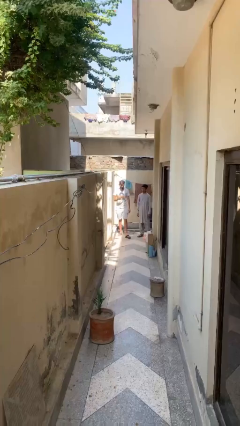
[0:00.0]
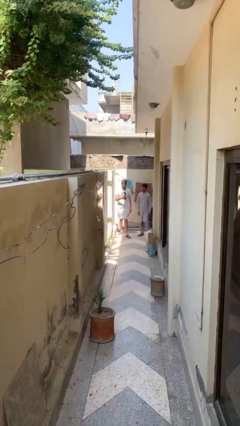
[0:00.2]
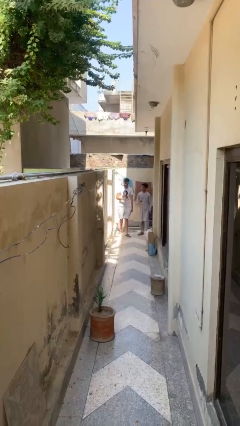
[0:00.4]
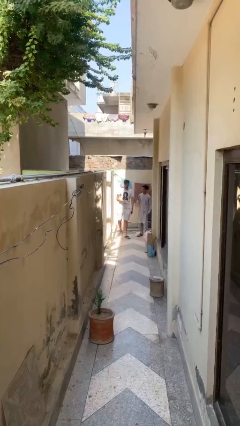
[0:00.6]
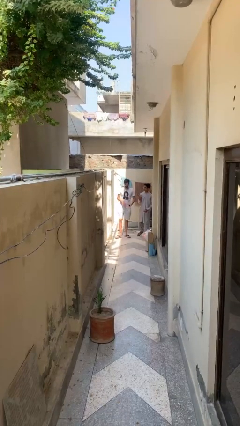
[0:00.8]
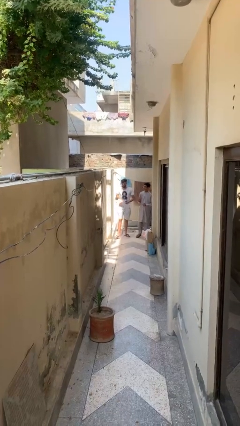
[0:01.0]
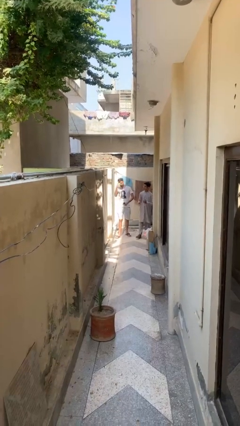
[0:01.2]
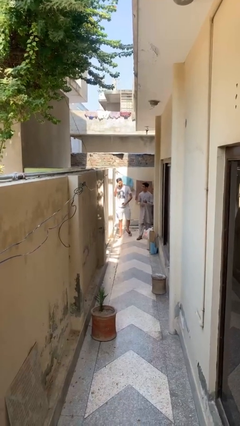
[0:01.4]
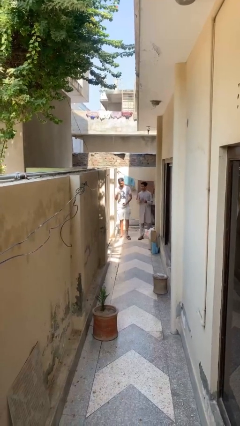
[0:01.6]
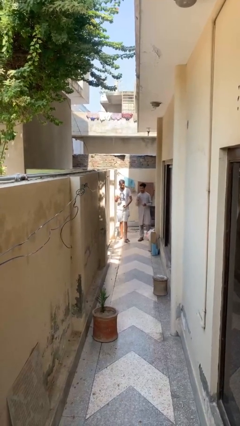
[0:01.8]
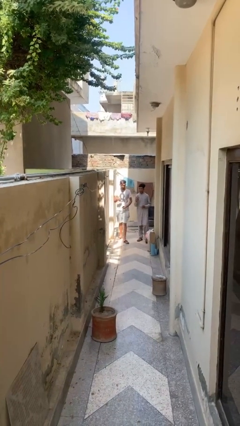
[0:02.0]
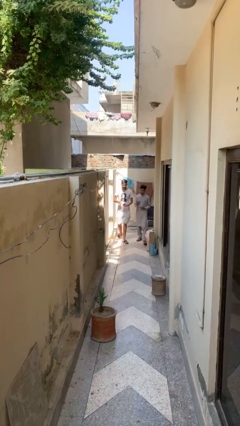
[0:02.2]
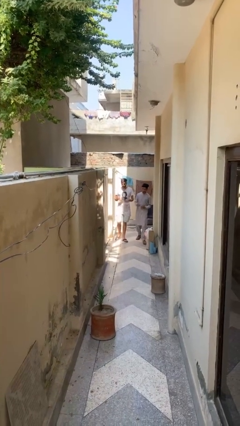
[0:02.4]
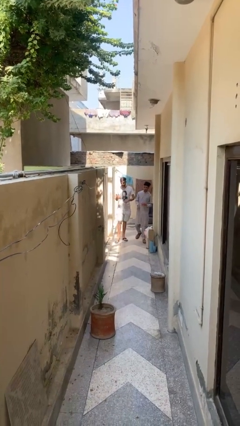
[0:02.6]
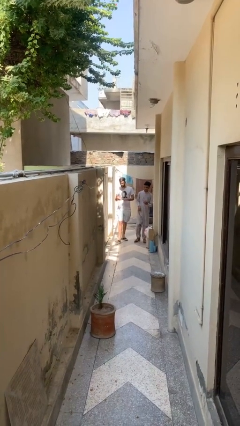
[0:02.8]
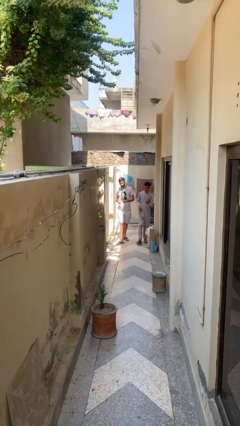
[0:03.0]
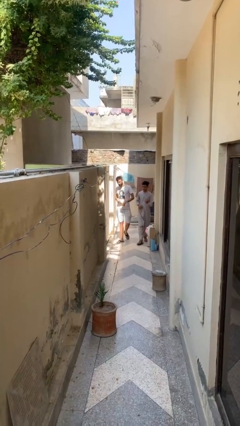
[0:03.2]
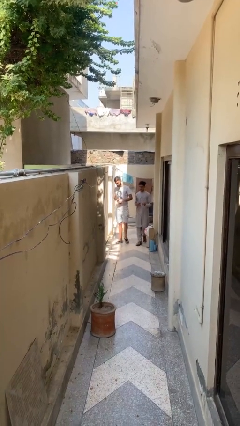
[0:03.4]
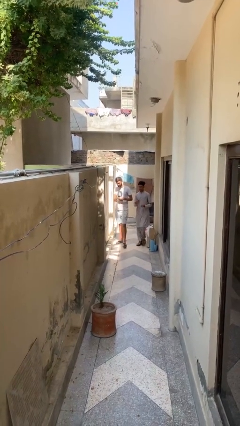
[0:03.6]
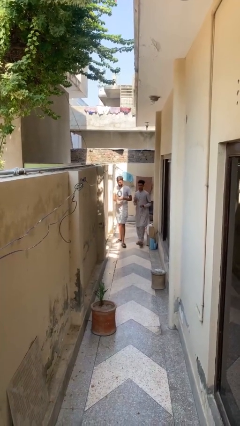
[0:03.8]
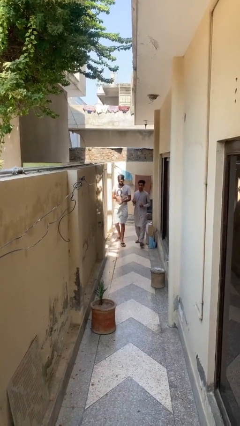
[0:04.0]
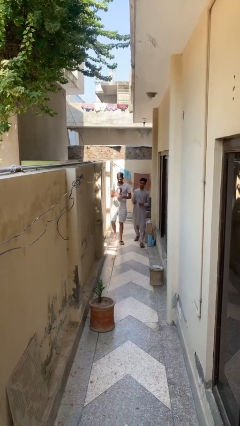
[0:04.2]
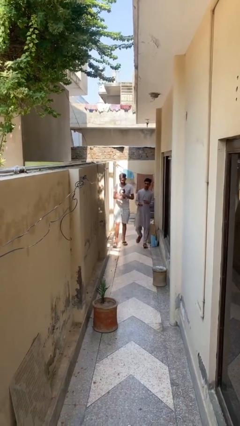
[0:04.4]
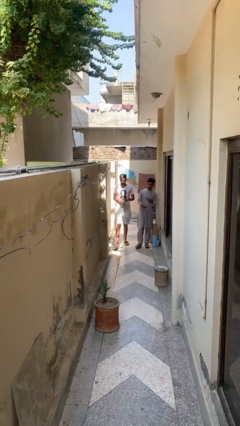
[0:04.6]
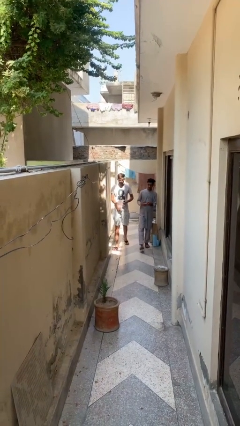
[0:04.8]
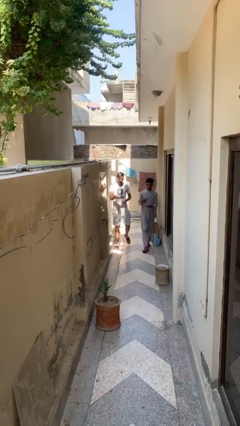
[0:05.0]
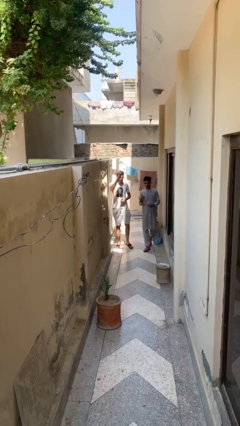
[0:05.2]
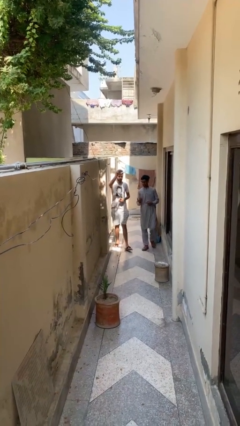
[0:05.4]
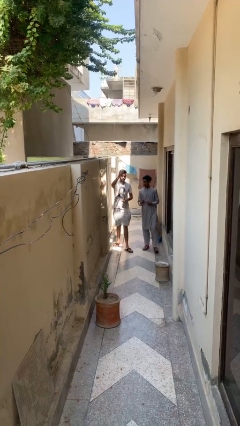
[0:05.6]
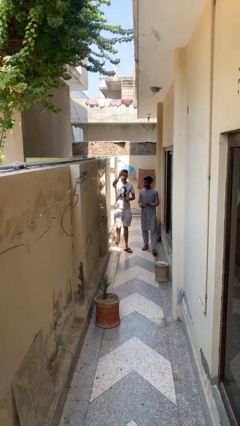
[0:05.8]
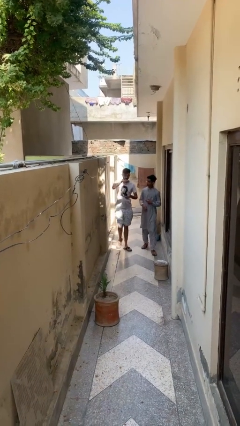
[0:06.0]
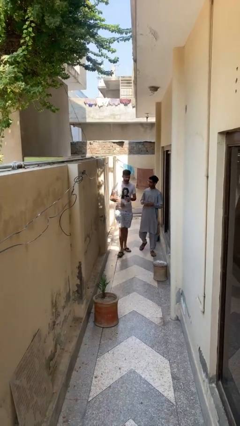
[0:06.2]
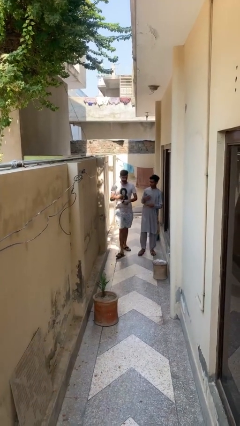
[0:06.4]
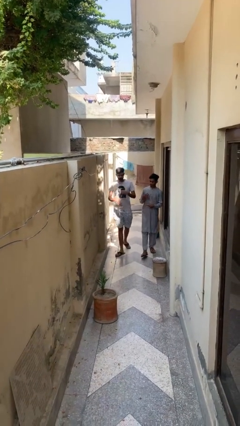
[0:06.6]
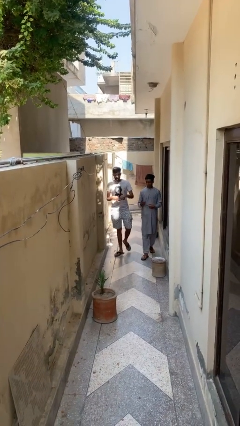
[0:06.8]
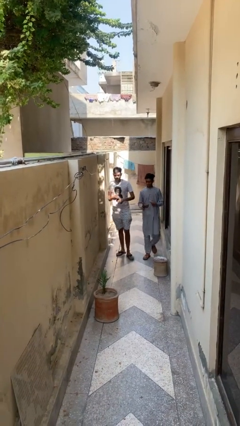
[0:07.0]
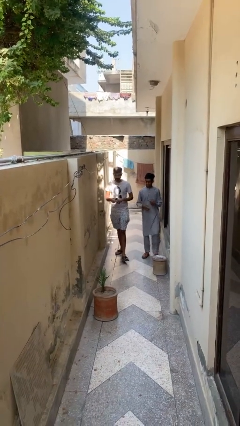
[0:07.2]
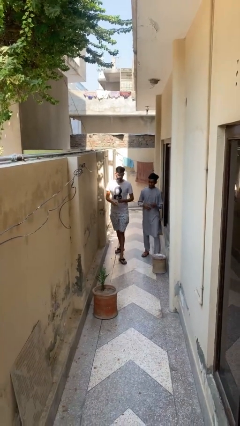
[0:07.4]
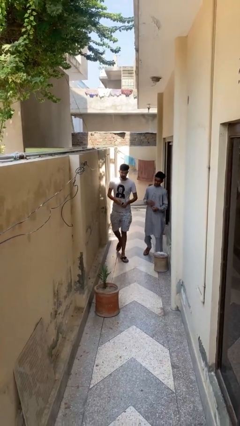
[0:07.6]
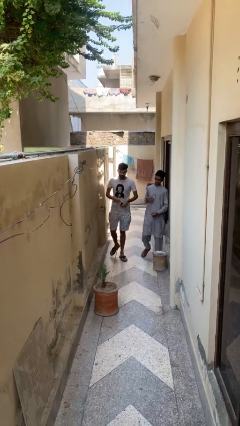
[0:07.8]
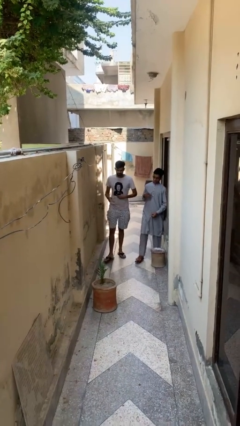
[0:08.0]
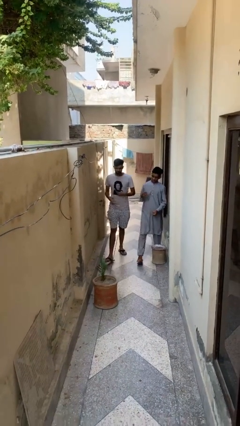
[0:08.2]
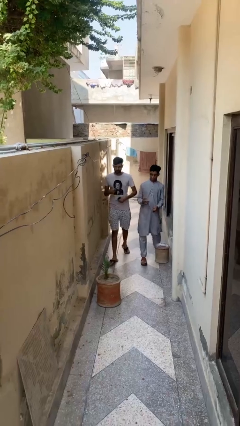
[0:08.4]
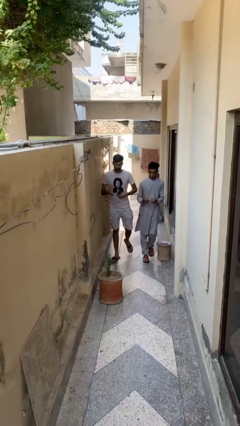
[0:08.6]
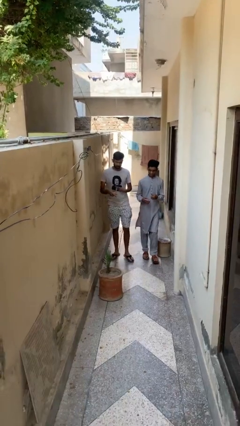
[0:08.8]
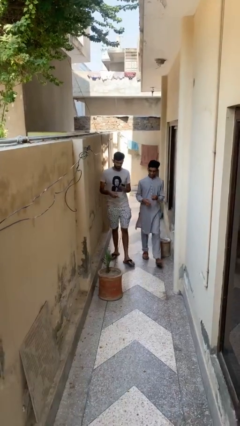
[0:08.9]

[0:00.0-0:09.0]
person talks to person

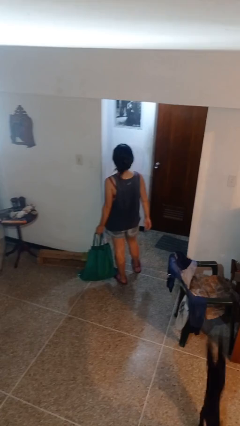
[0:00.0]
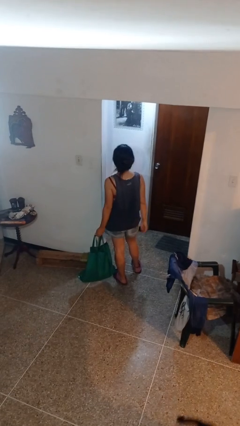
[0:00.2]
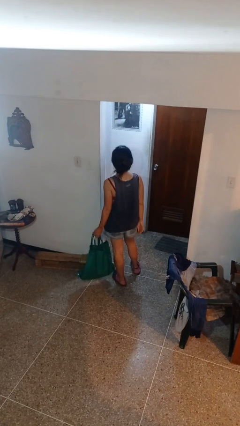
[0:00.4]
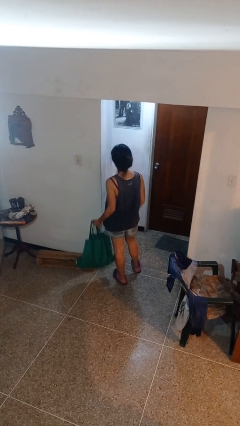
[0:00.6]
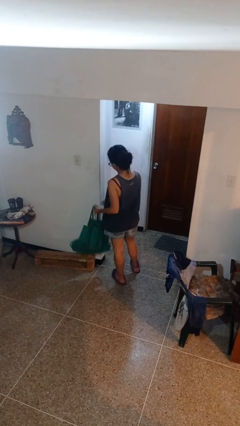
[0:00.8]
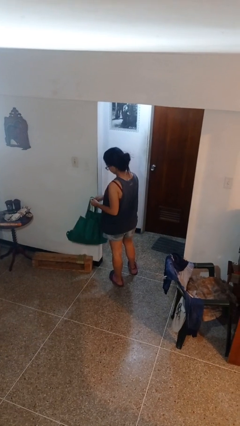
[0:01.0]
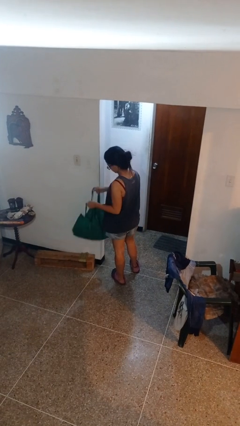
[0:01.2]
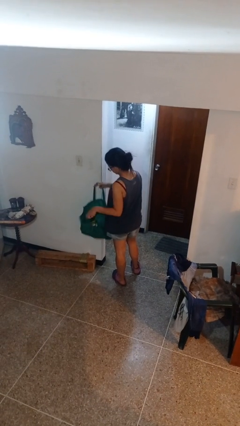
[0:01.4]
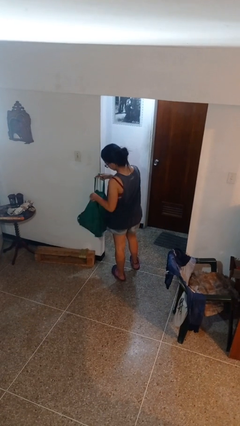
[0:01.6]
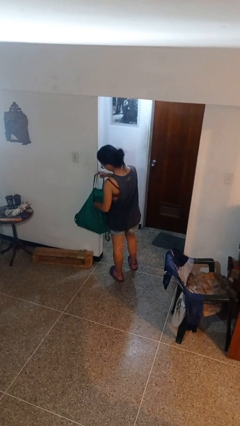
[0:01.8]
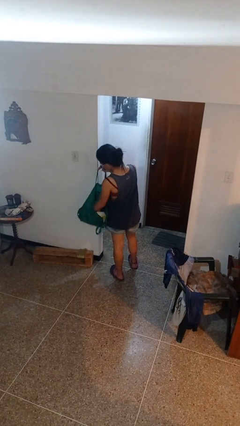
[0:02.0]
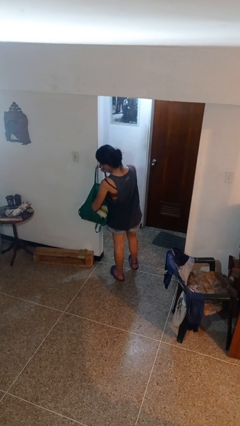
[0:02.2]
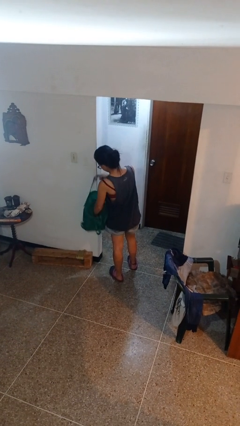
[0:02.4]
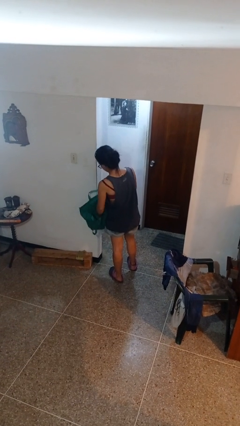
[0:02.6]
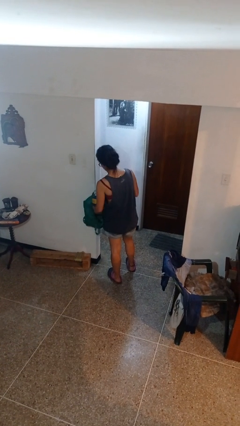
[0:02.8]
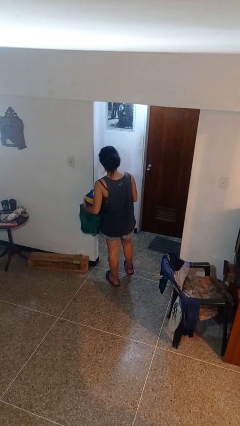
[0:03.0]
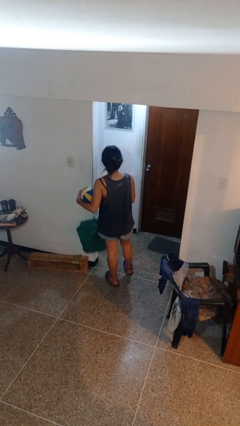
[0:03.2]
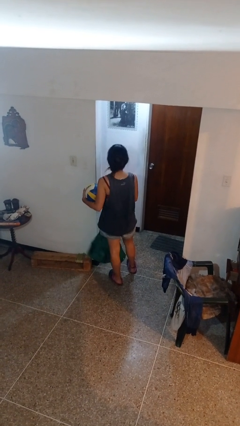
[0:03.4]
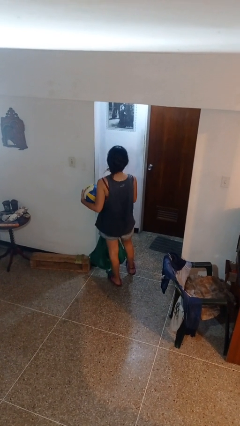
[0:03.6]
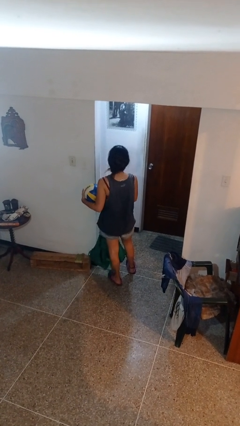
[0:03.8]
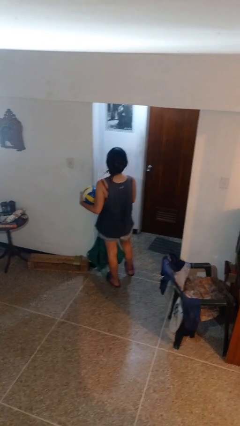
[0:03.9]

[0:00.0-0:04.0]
person takes object from bag

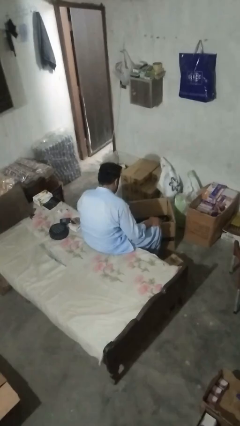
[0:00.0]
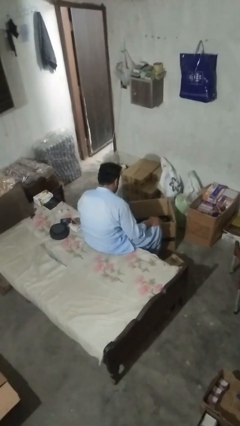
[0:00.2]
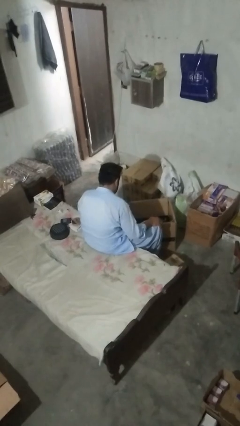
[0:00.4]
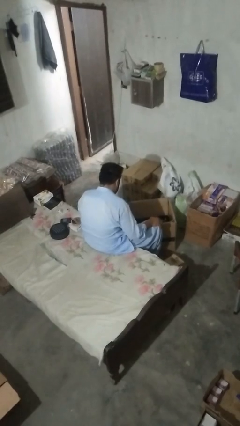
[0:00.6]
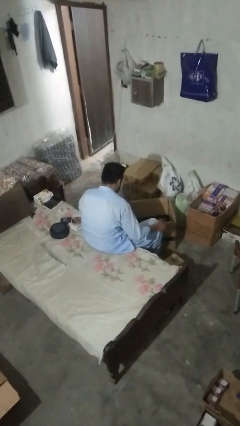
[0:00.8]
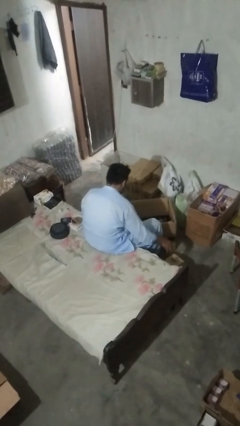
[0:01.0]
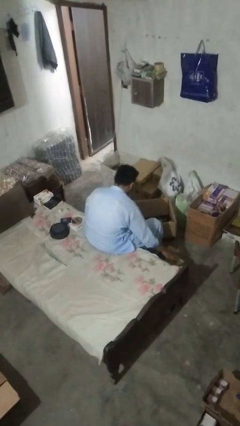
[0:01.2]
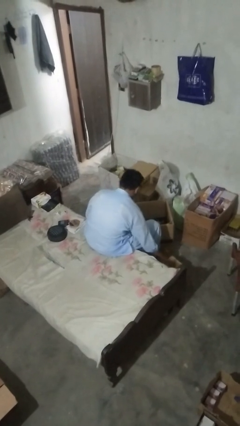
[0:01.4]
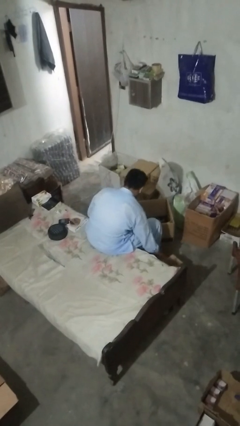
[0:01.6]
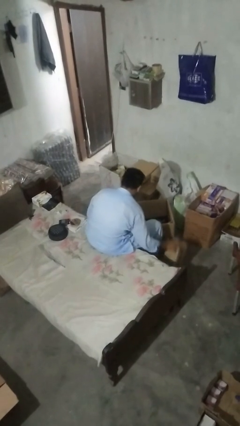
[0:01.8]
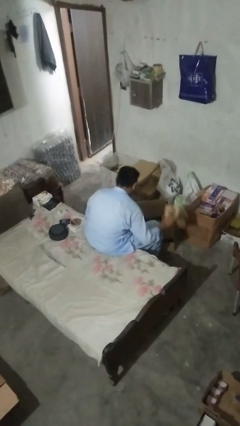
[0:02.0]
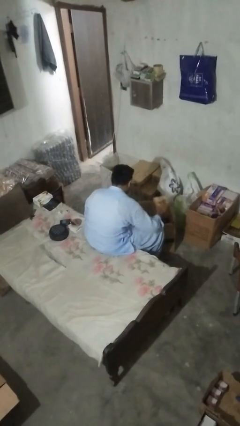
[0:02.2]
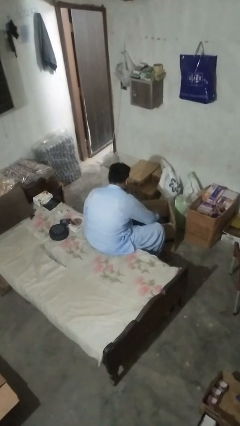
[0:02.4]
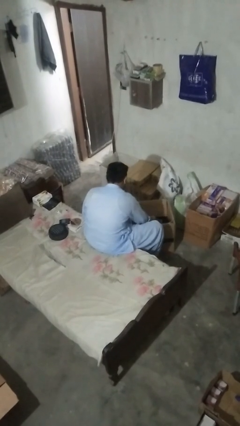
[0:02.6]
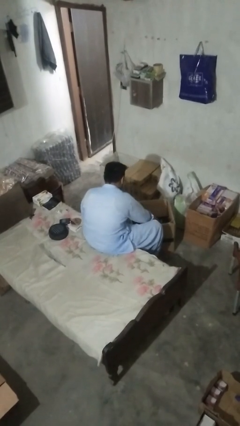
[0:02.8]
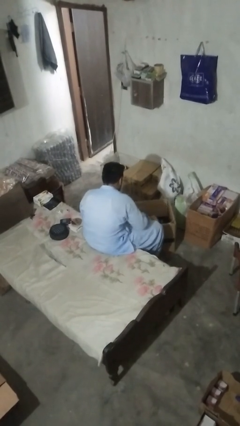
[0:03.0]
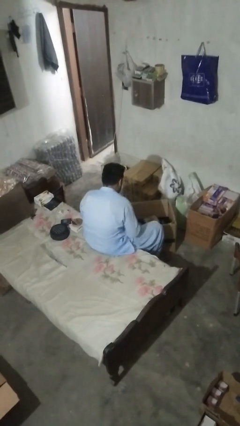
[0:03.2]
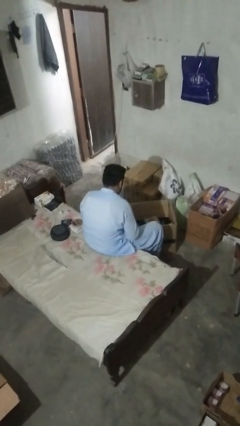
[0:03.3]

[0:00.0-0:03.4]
person puts object into box

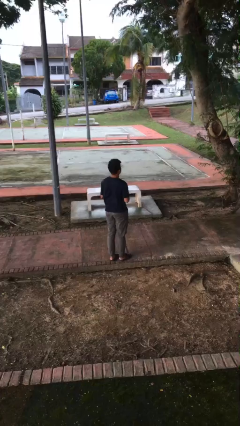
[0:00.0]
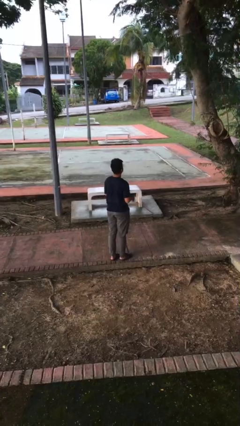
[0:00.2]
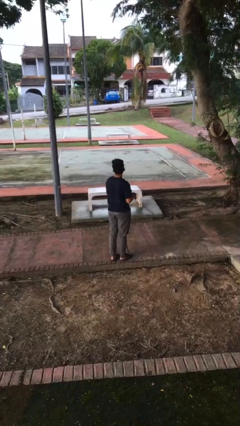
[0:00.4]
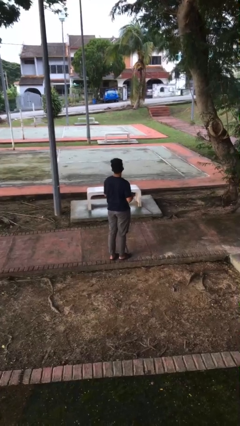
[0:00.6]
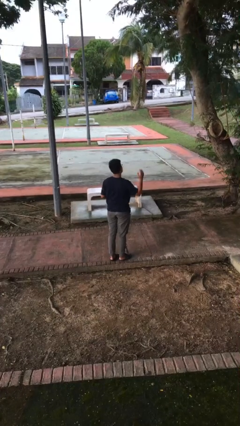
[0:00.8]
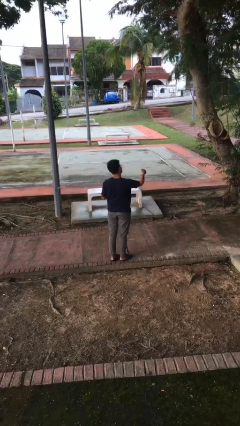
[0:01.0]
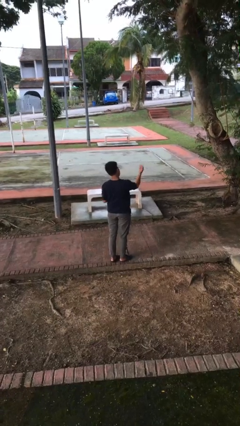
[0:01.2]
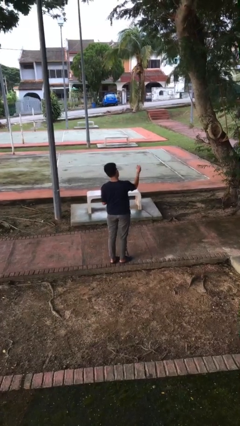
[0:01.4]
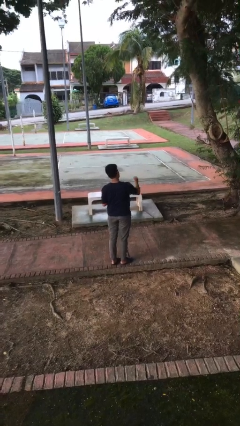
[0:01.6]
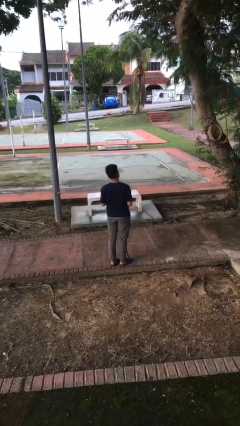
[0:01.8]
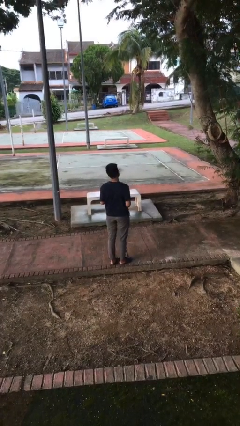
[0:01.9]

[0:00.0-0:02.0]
person karate chop
